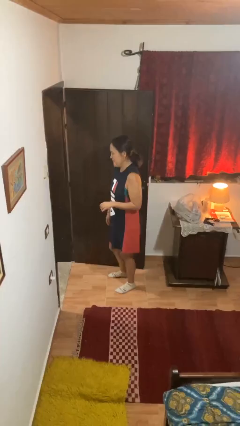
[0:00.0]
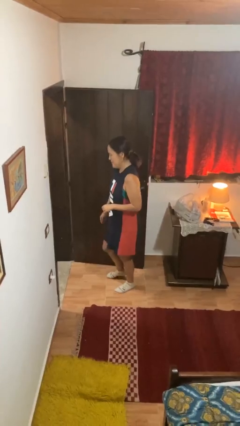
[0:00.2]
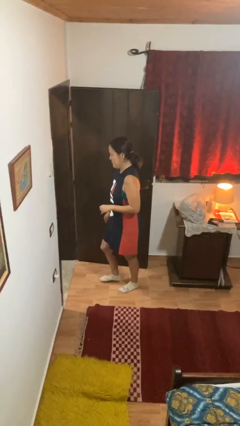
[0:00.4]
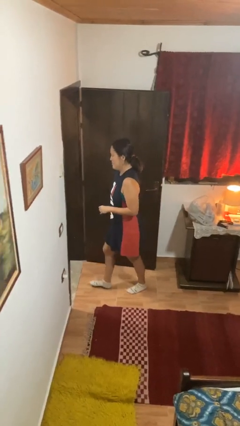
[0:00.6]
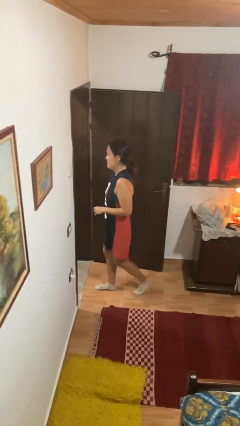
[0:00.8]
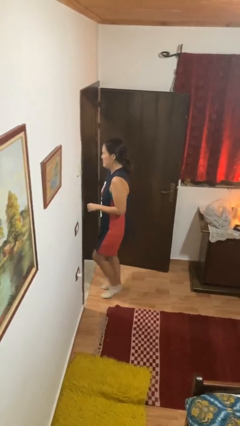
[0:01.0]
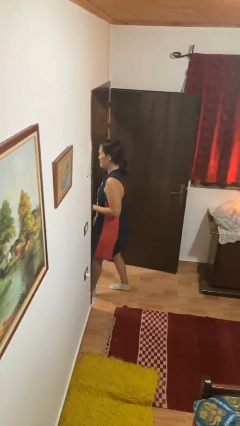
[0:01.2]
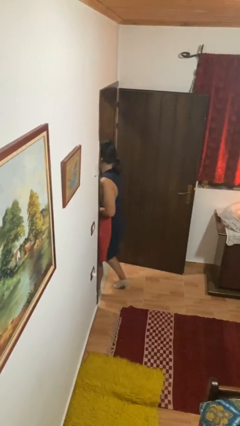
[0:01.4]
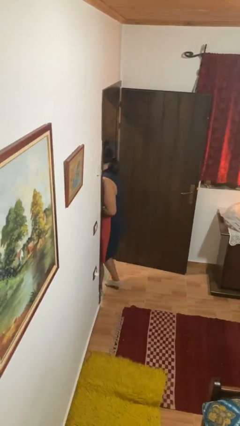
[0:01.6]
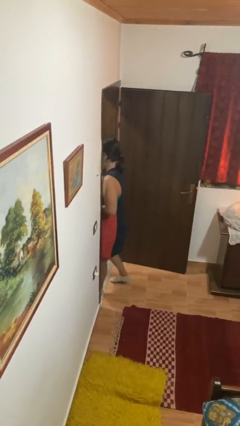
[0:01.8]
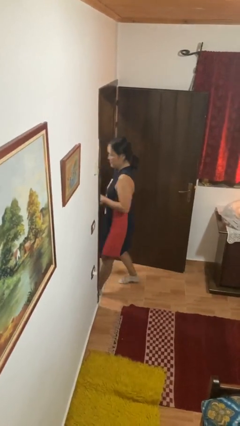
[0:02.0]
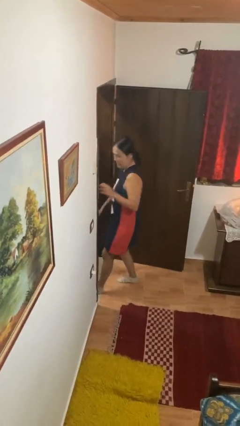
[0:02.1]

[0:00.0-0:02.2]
person bumps into wall

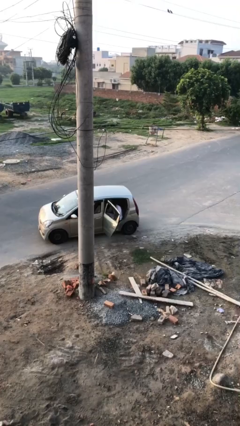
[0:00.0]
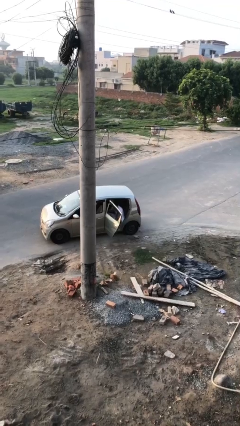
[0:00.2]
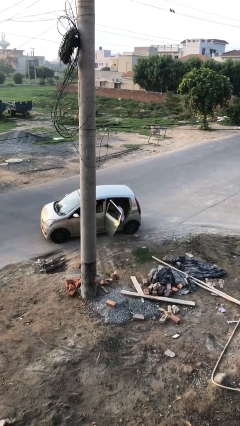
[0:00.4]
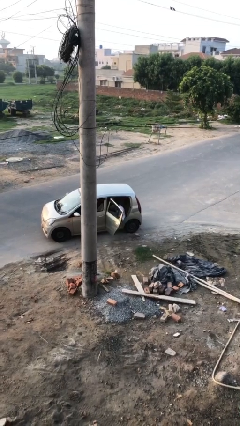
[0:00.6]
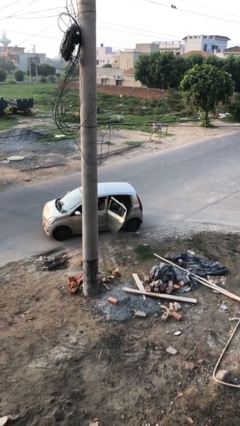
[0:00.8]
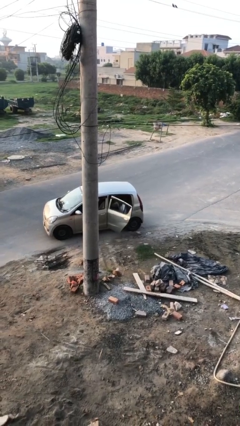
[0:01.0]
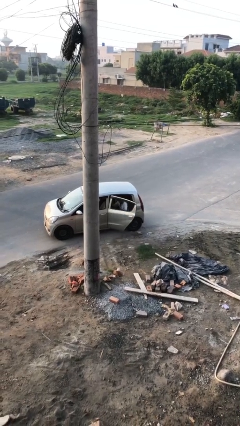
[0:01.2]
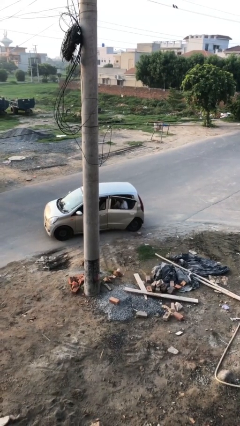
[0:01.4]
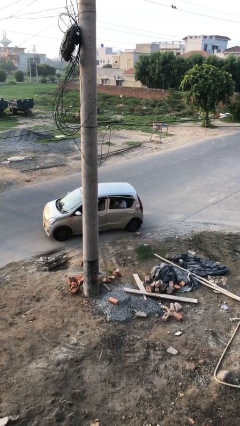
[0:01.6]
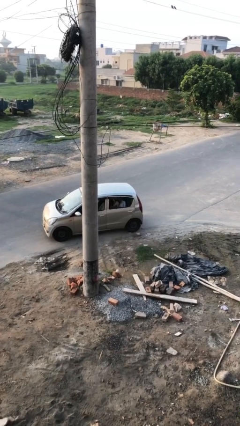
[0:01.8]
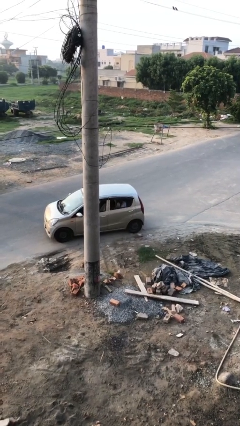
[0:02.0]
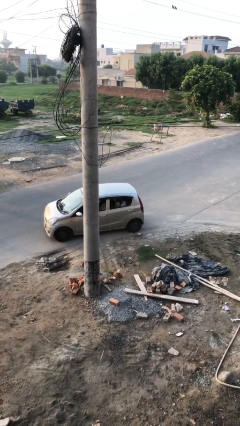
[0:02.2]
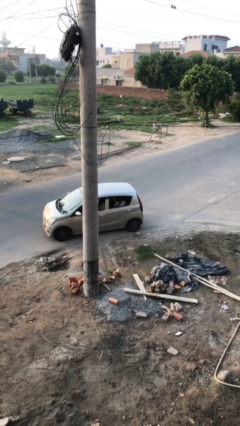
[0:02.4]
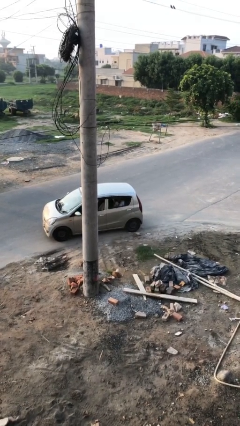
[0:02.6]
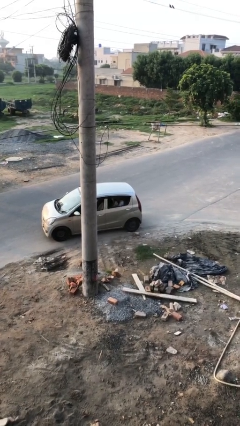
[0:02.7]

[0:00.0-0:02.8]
person closes car door

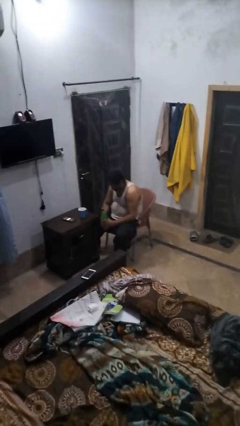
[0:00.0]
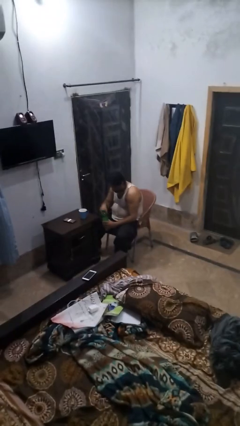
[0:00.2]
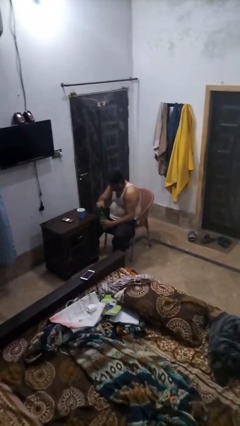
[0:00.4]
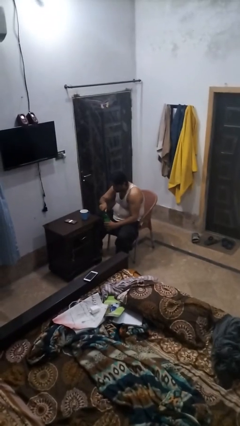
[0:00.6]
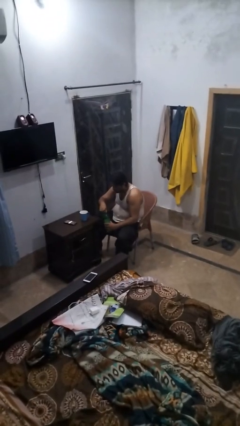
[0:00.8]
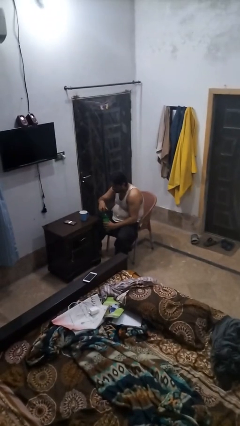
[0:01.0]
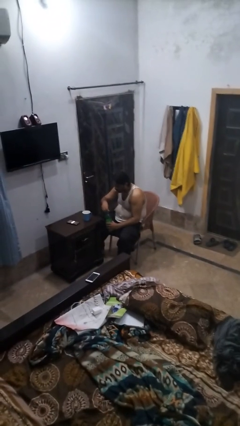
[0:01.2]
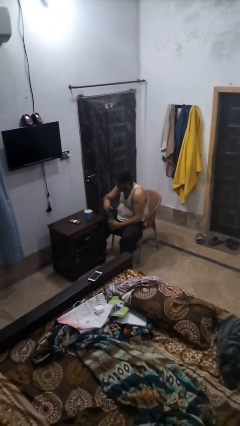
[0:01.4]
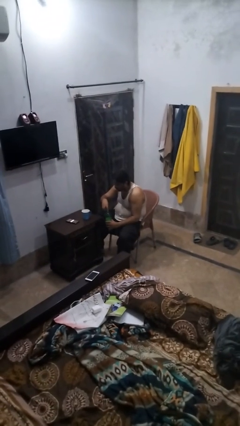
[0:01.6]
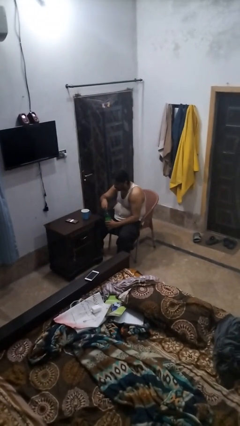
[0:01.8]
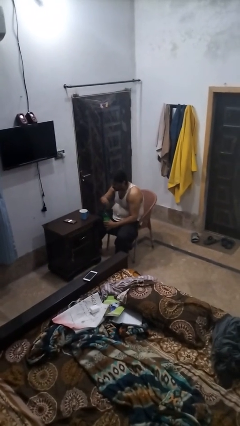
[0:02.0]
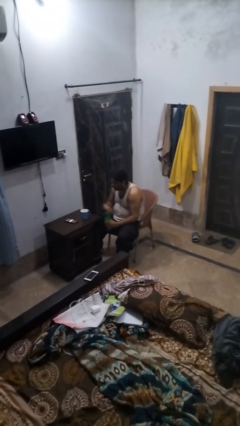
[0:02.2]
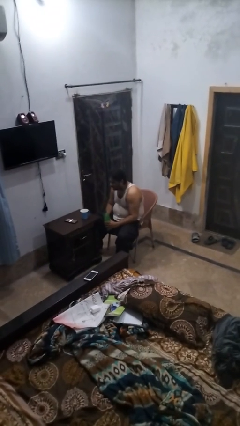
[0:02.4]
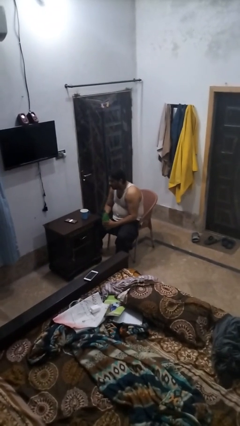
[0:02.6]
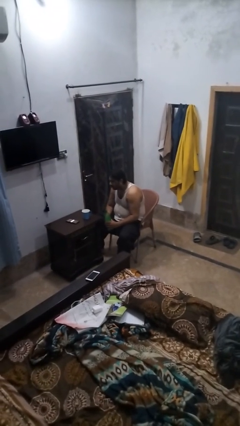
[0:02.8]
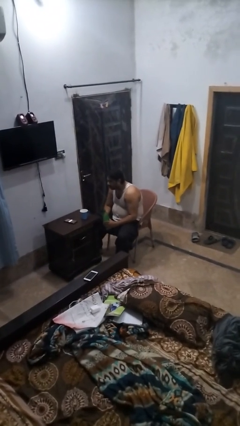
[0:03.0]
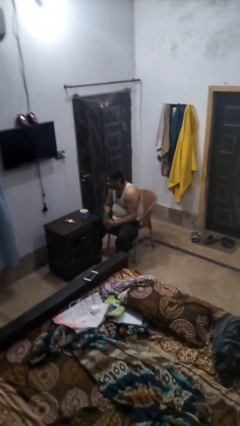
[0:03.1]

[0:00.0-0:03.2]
person unscrews lid from bottle

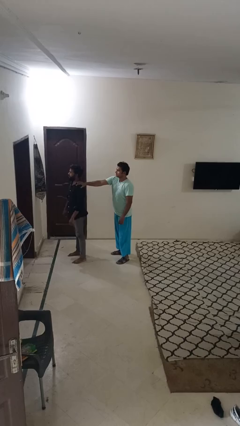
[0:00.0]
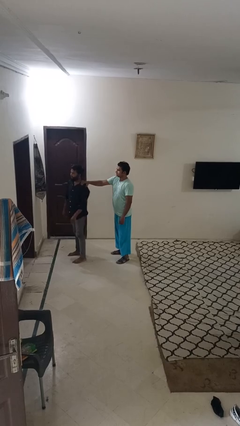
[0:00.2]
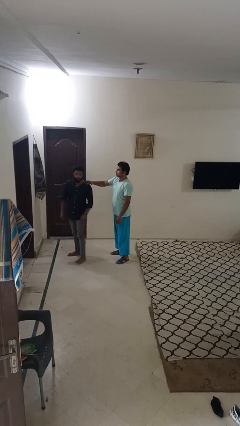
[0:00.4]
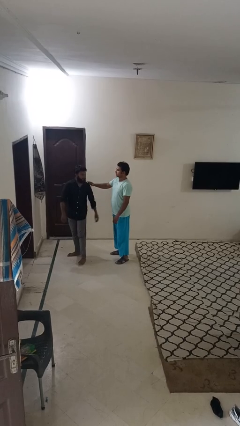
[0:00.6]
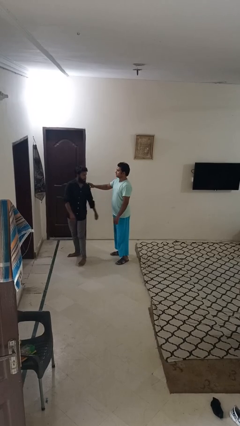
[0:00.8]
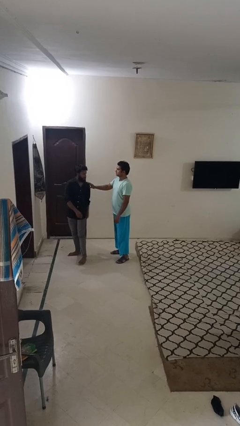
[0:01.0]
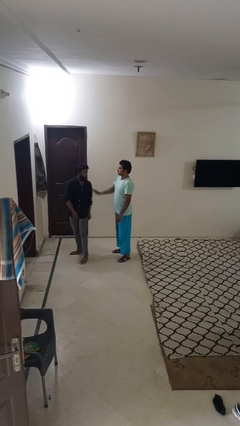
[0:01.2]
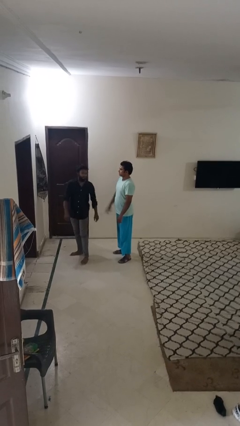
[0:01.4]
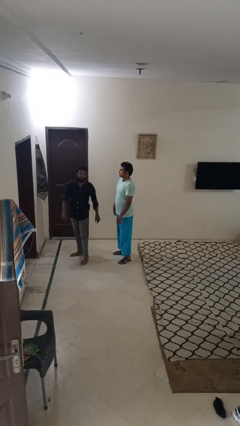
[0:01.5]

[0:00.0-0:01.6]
person spins person around

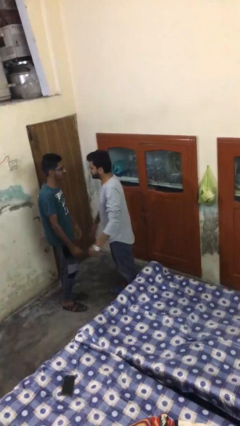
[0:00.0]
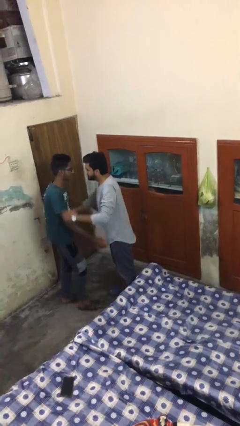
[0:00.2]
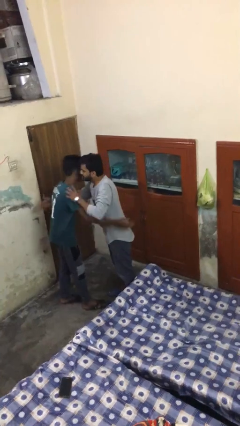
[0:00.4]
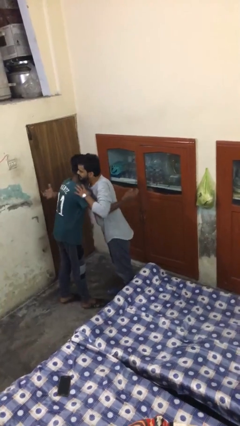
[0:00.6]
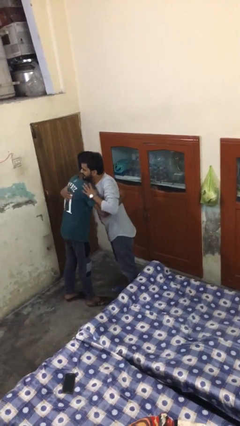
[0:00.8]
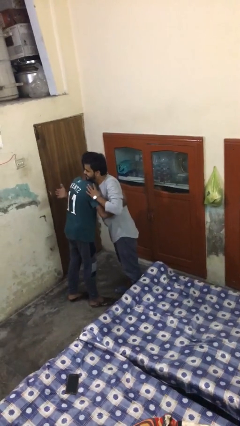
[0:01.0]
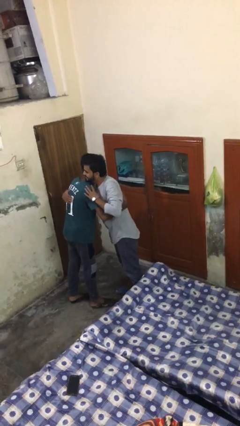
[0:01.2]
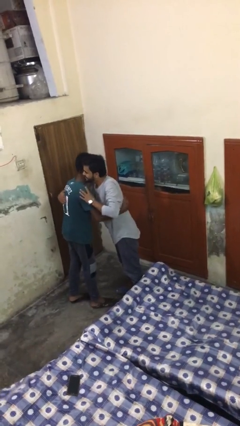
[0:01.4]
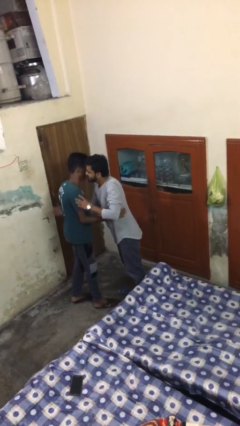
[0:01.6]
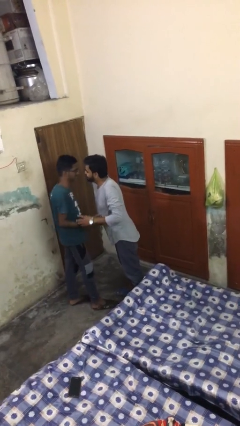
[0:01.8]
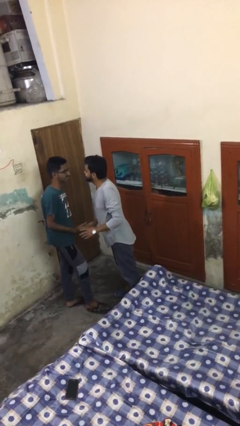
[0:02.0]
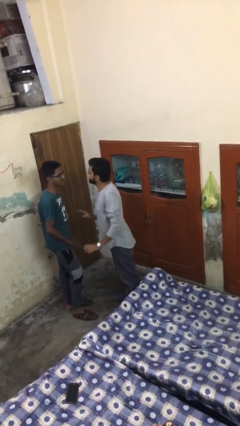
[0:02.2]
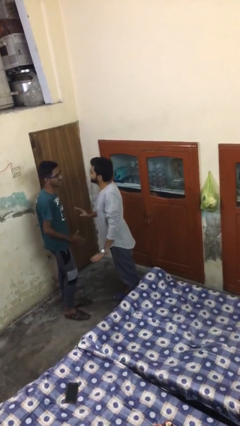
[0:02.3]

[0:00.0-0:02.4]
person embraces person

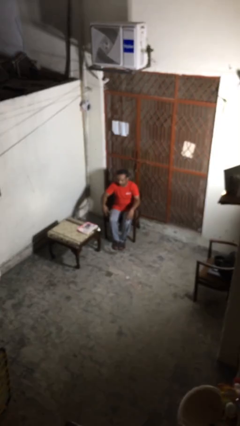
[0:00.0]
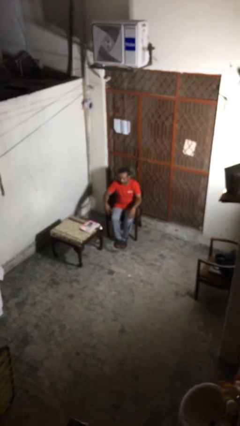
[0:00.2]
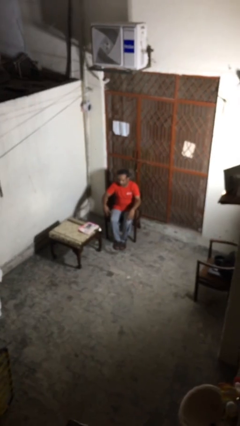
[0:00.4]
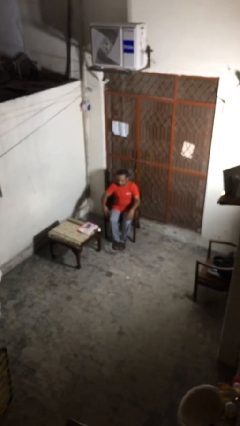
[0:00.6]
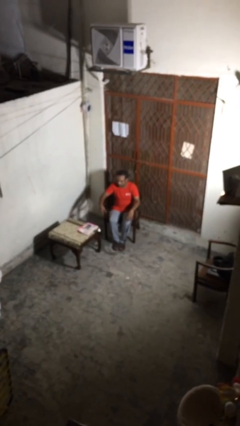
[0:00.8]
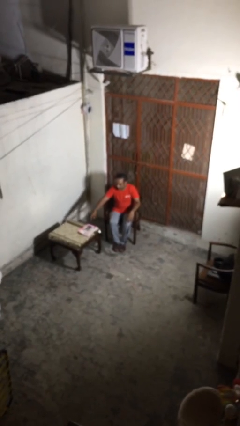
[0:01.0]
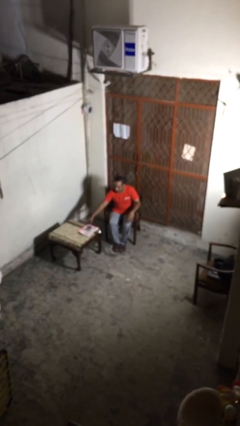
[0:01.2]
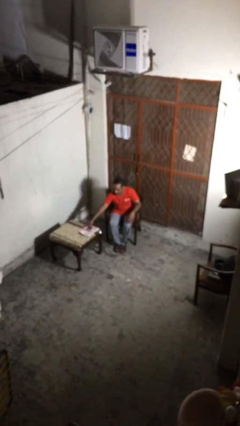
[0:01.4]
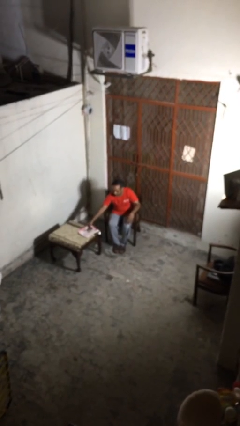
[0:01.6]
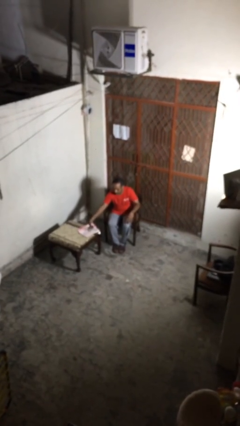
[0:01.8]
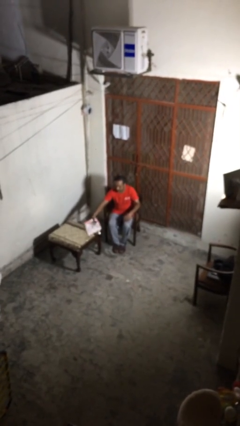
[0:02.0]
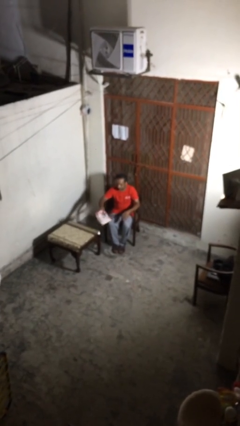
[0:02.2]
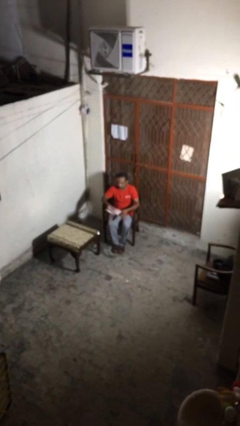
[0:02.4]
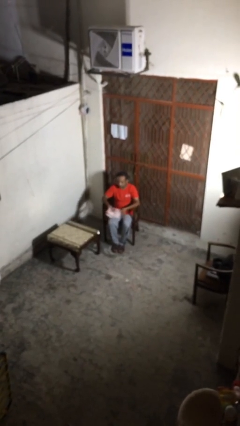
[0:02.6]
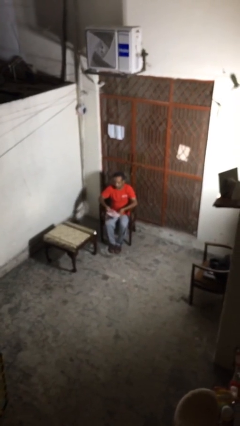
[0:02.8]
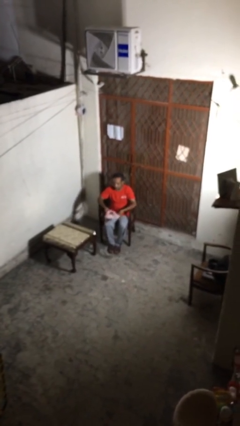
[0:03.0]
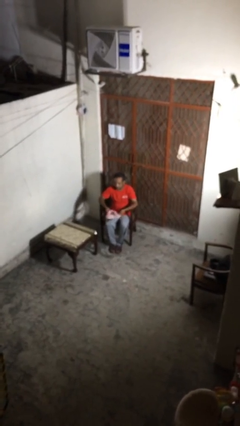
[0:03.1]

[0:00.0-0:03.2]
person picks up object from table

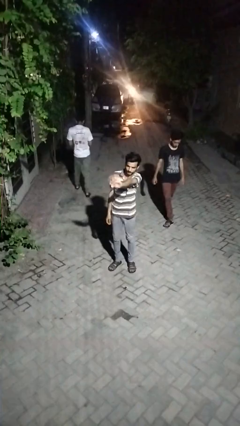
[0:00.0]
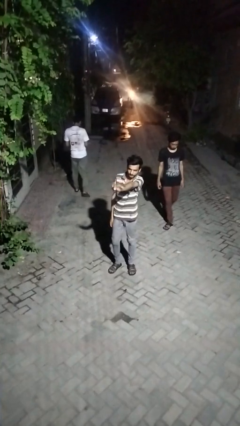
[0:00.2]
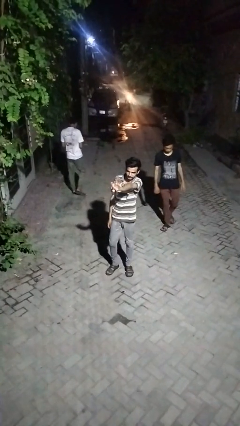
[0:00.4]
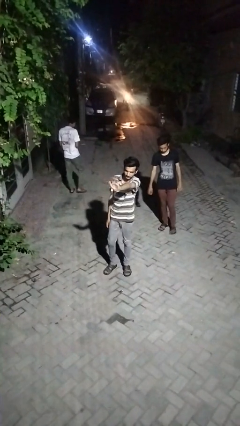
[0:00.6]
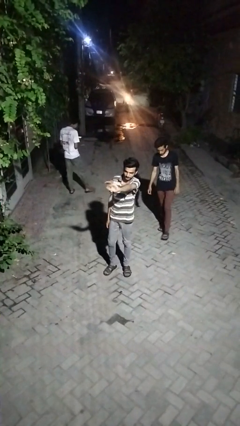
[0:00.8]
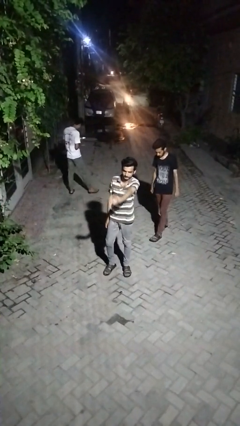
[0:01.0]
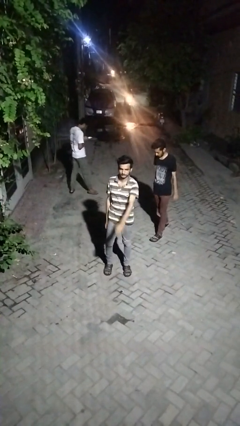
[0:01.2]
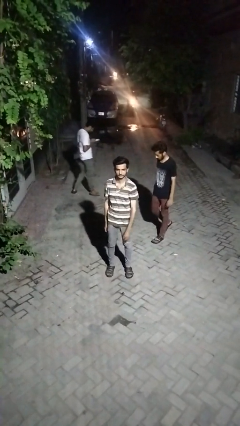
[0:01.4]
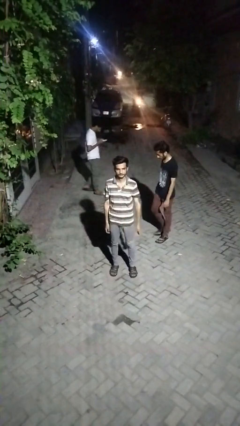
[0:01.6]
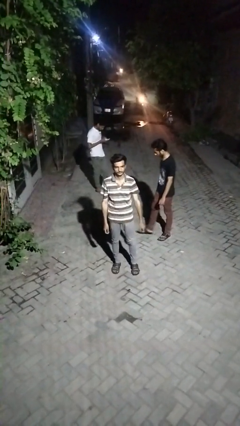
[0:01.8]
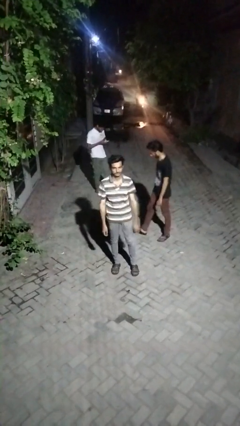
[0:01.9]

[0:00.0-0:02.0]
person waves at person
